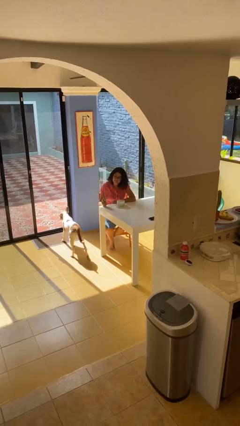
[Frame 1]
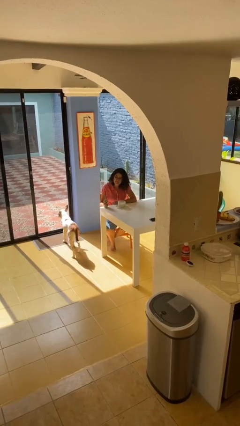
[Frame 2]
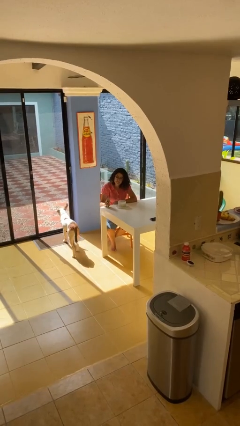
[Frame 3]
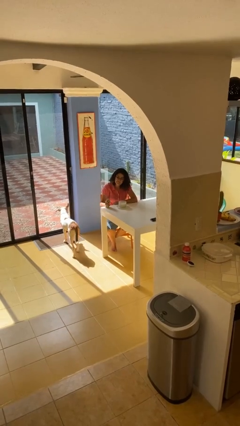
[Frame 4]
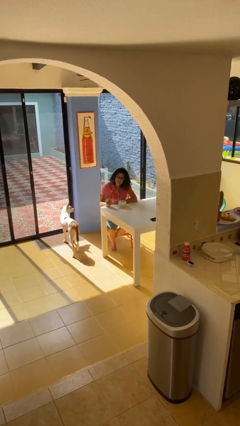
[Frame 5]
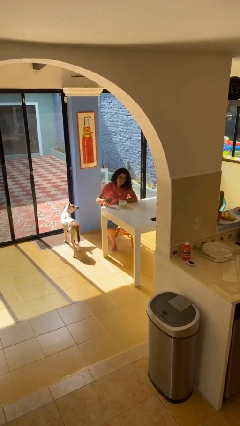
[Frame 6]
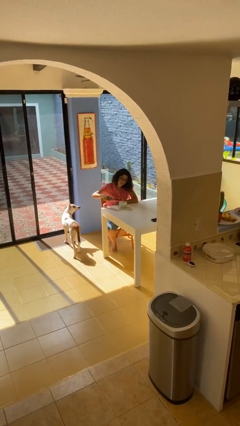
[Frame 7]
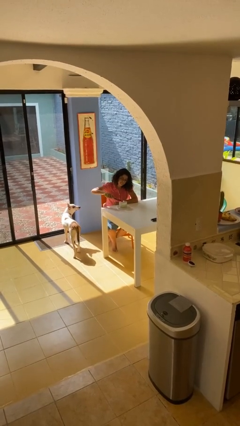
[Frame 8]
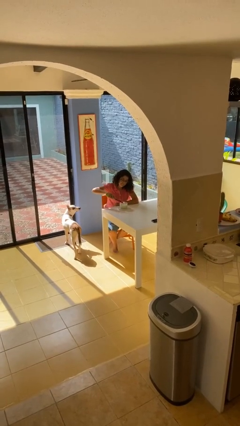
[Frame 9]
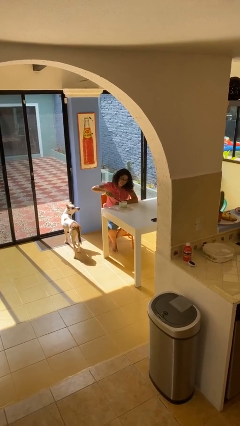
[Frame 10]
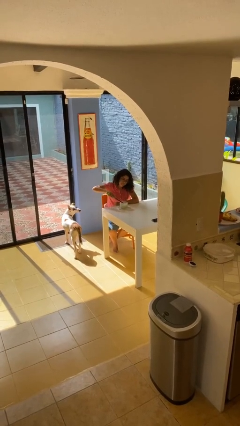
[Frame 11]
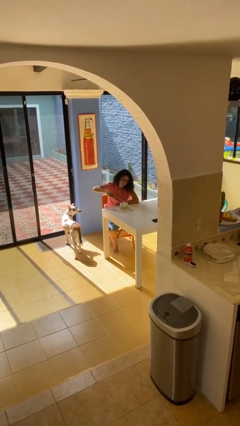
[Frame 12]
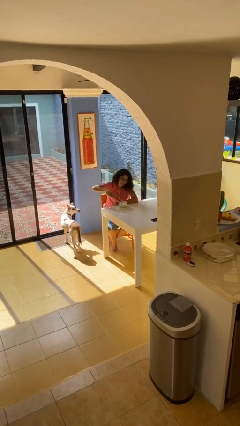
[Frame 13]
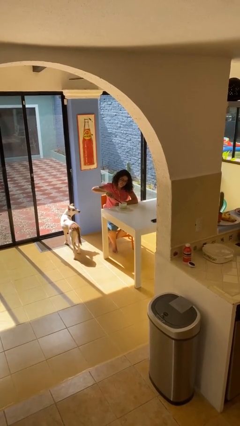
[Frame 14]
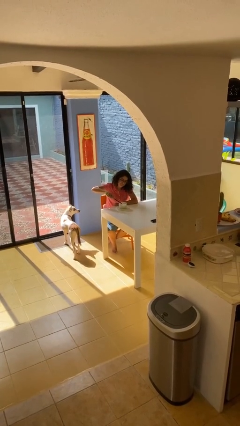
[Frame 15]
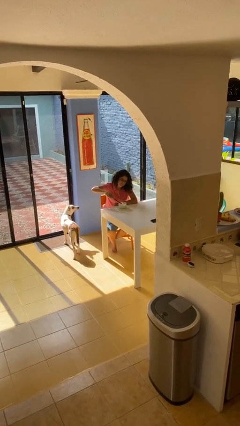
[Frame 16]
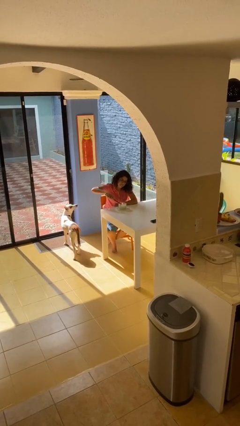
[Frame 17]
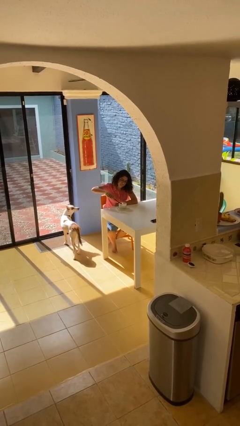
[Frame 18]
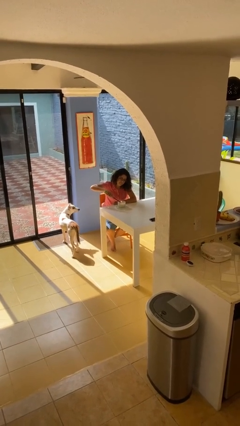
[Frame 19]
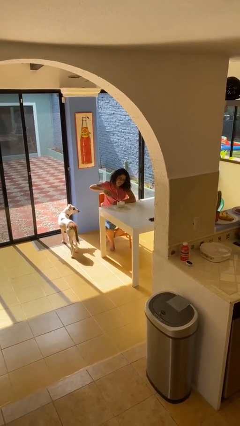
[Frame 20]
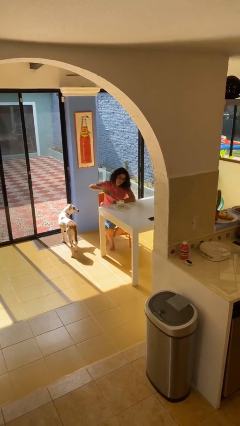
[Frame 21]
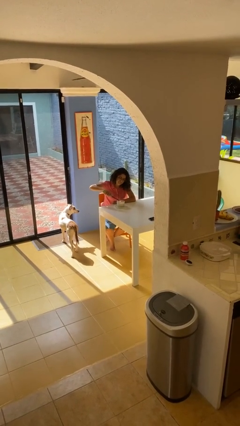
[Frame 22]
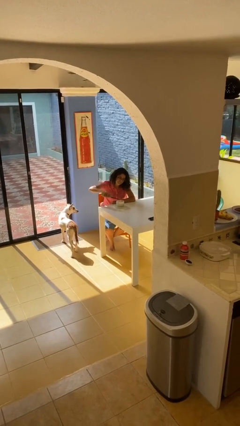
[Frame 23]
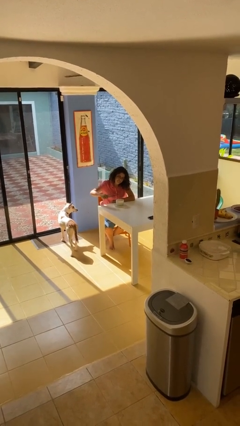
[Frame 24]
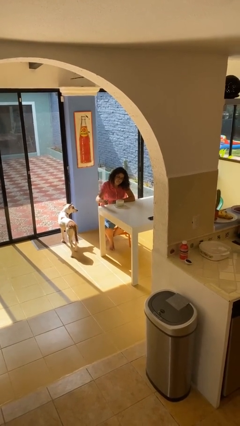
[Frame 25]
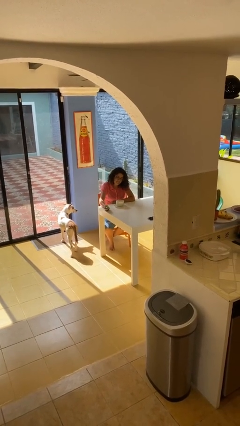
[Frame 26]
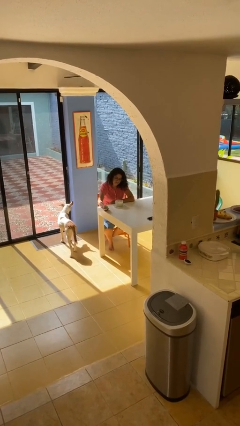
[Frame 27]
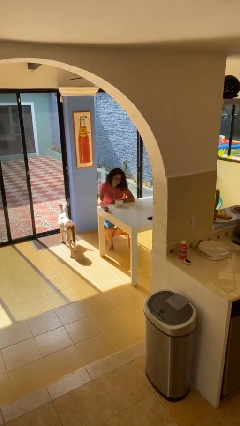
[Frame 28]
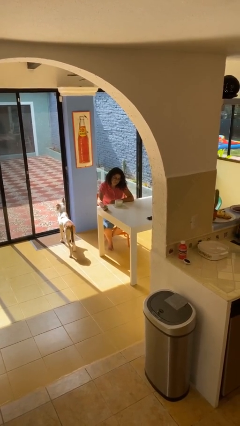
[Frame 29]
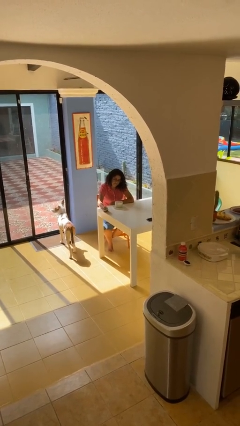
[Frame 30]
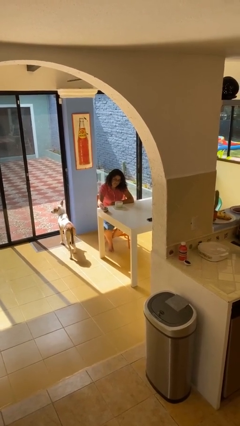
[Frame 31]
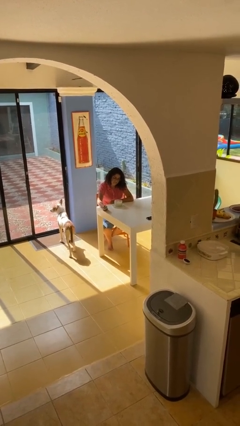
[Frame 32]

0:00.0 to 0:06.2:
person lights candle

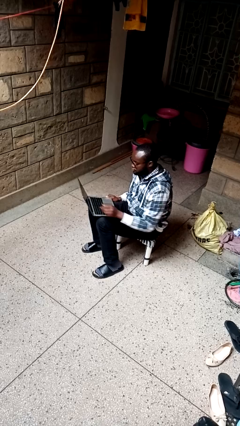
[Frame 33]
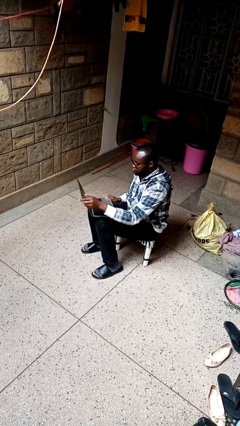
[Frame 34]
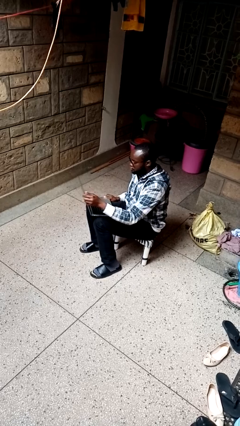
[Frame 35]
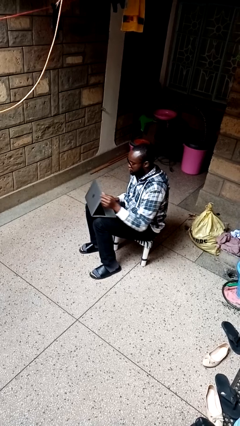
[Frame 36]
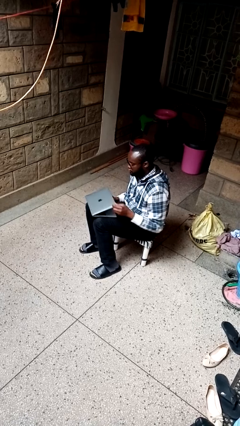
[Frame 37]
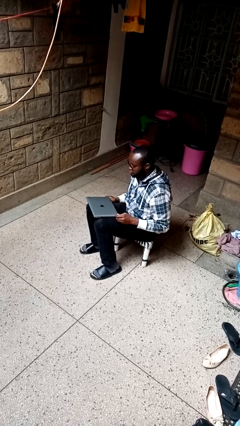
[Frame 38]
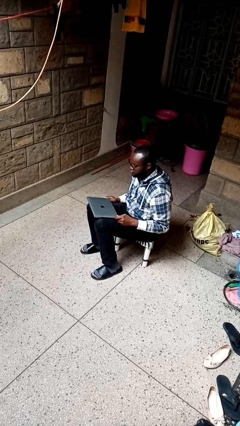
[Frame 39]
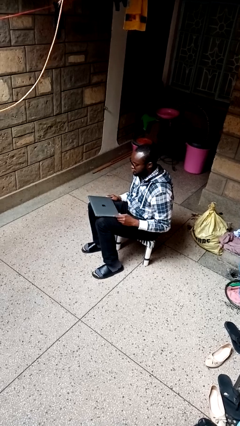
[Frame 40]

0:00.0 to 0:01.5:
person closes laptop

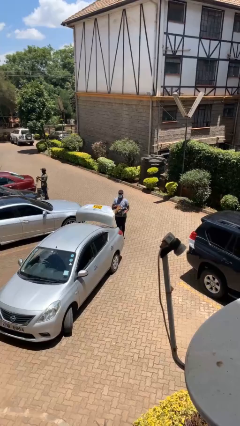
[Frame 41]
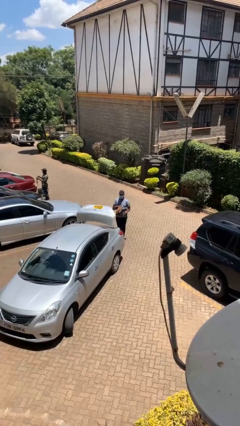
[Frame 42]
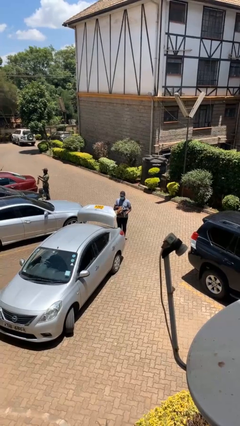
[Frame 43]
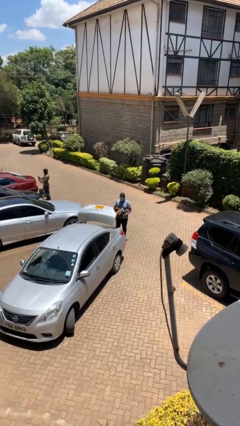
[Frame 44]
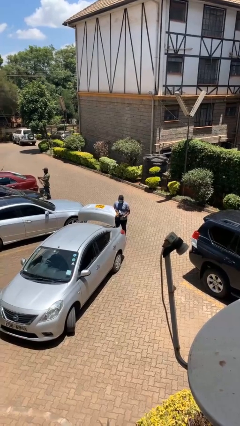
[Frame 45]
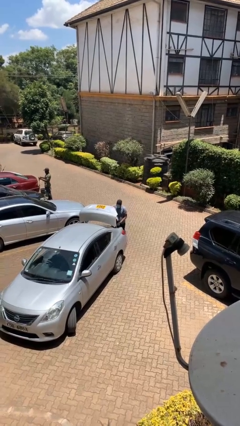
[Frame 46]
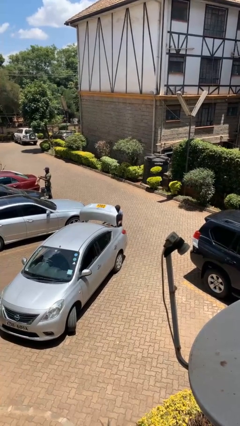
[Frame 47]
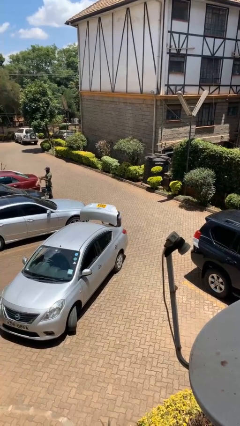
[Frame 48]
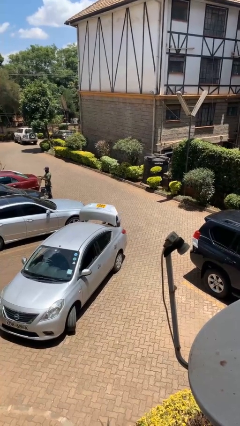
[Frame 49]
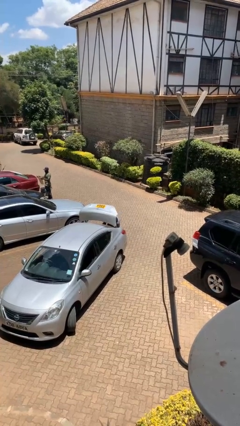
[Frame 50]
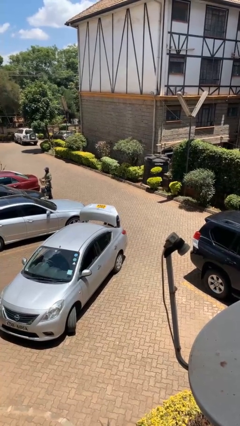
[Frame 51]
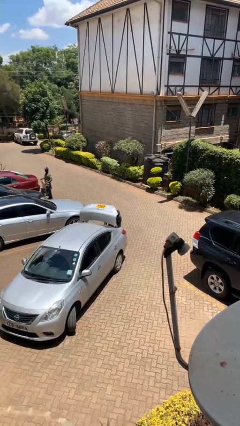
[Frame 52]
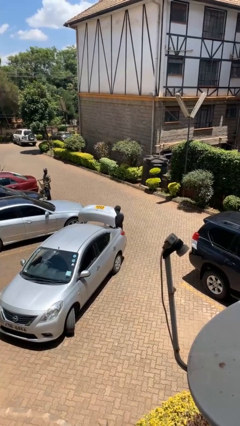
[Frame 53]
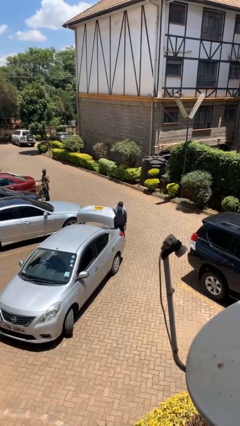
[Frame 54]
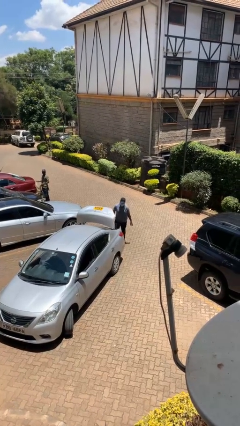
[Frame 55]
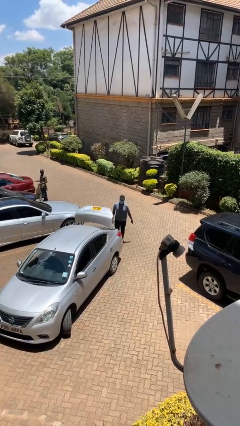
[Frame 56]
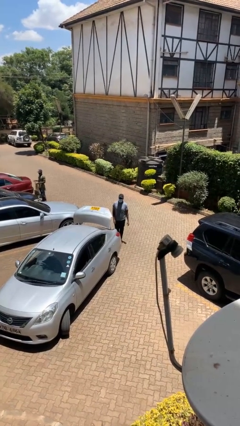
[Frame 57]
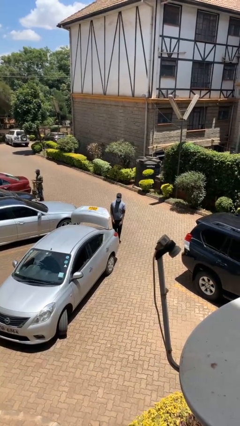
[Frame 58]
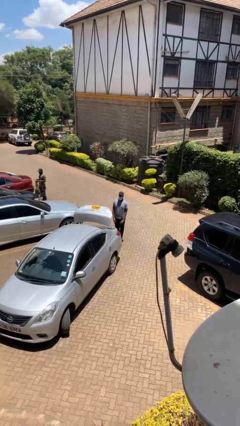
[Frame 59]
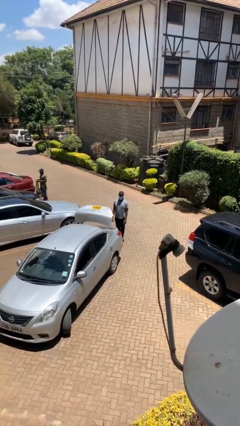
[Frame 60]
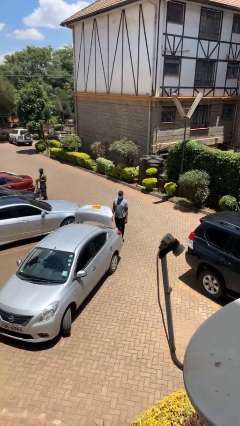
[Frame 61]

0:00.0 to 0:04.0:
person loads car

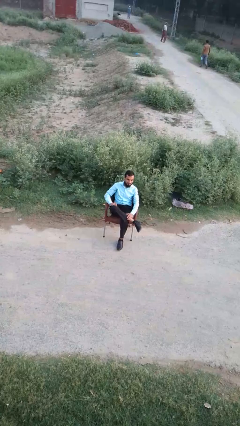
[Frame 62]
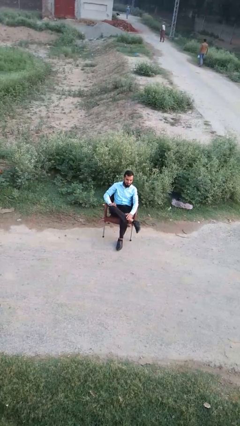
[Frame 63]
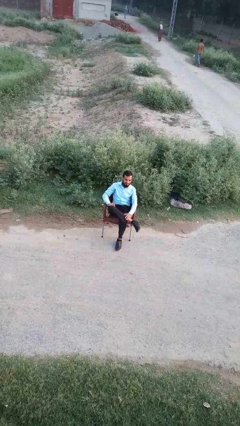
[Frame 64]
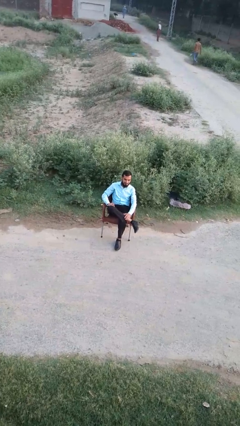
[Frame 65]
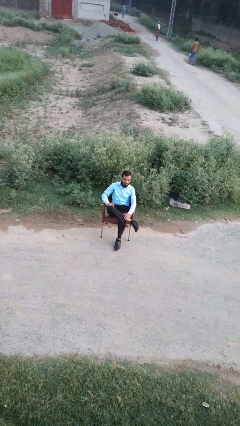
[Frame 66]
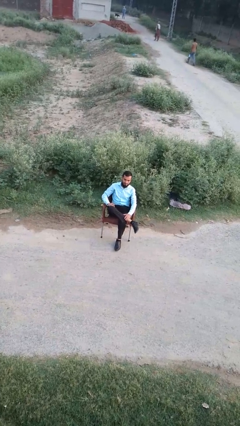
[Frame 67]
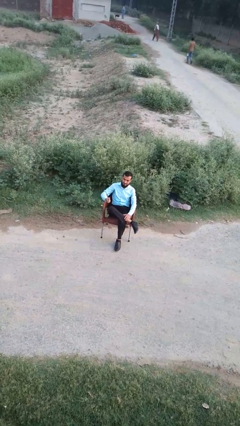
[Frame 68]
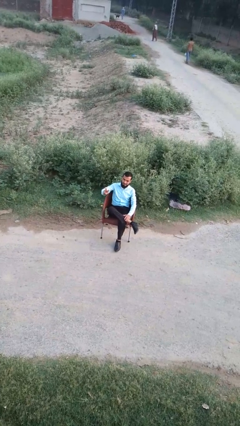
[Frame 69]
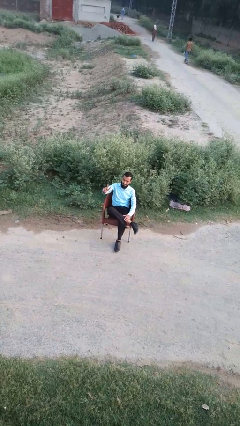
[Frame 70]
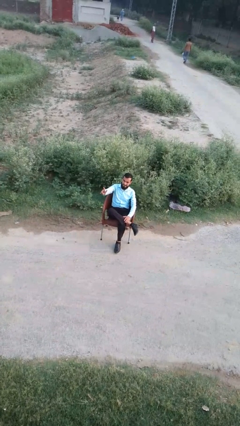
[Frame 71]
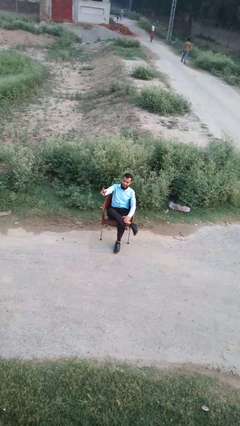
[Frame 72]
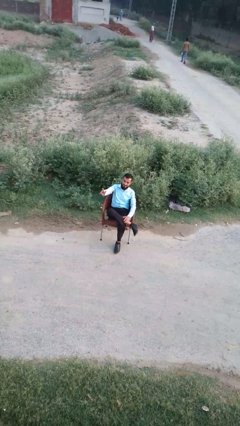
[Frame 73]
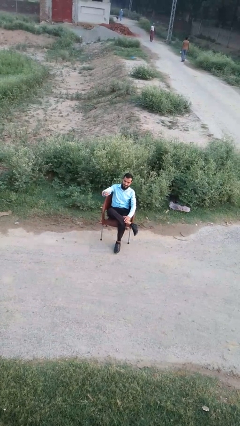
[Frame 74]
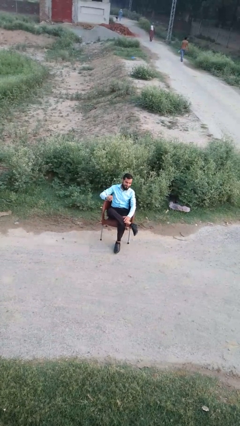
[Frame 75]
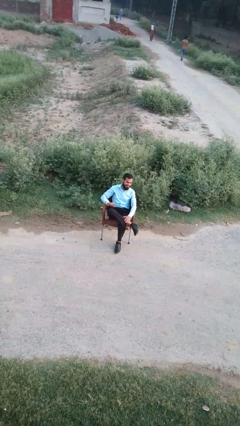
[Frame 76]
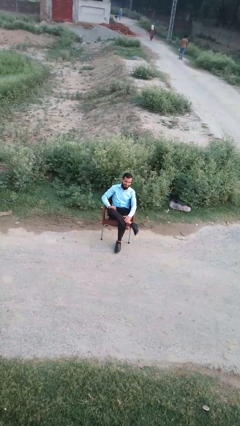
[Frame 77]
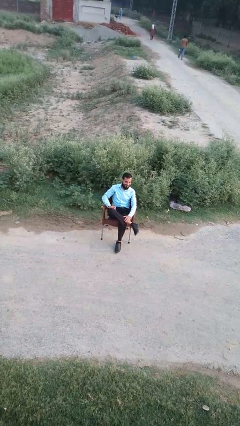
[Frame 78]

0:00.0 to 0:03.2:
person gestures peace

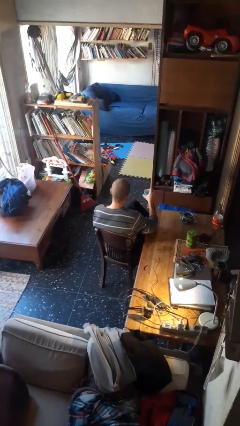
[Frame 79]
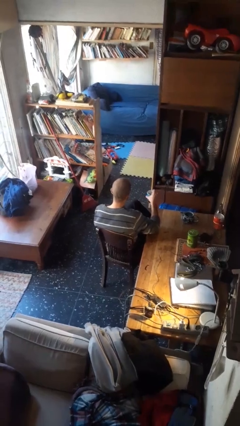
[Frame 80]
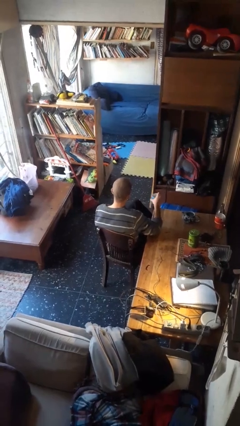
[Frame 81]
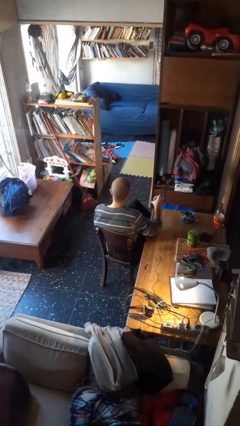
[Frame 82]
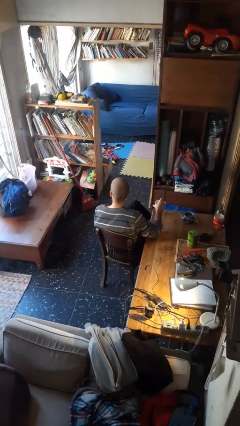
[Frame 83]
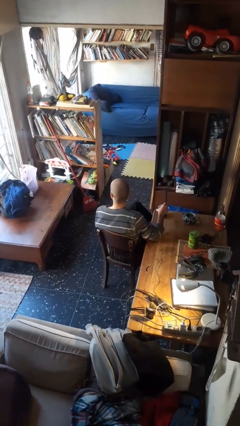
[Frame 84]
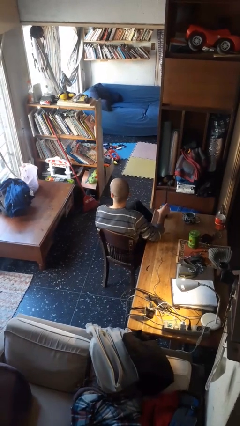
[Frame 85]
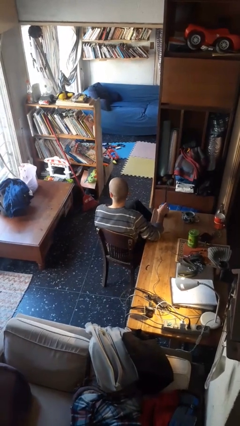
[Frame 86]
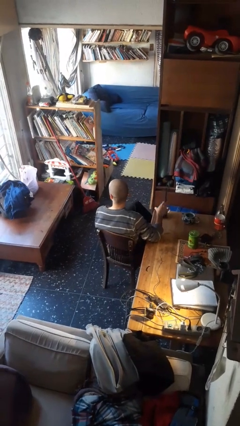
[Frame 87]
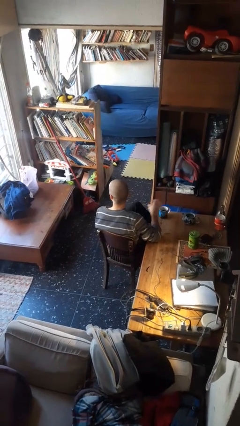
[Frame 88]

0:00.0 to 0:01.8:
person puts down object on table

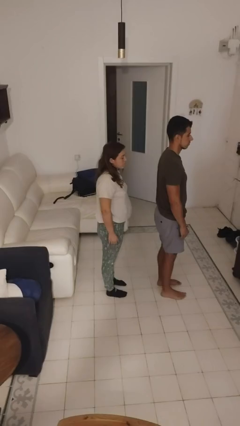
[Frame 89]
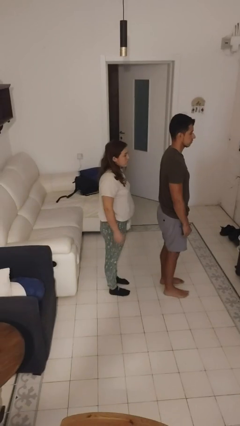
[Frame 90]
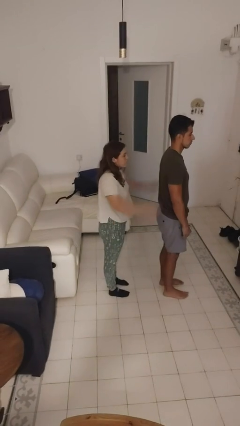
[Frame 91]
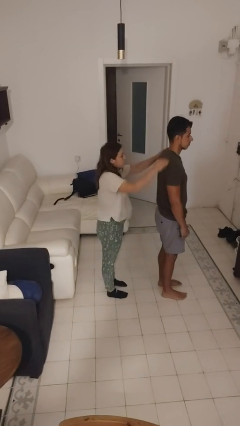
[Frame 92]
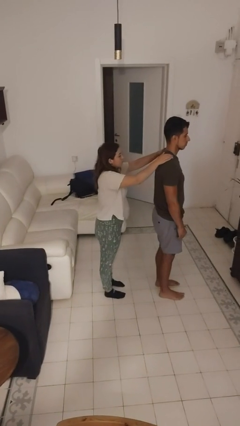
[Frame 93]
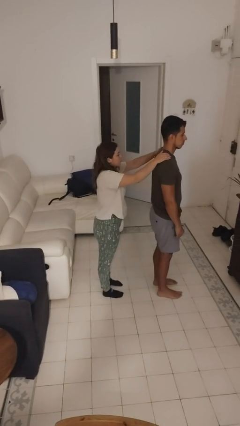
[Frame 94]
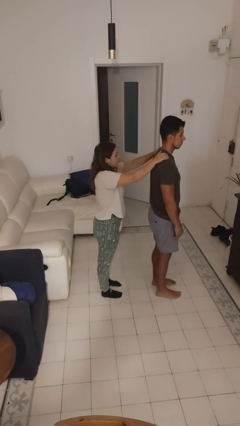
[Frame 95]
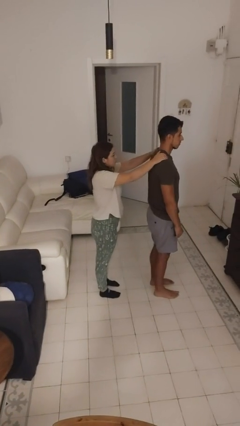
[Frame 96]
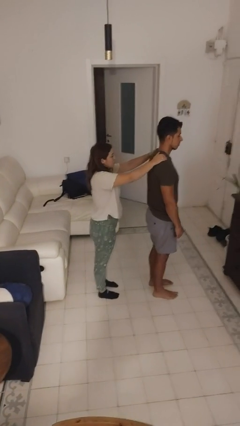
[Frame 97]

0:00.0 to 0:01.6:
person grabs person by shoulder
